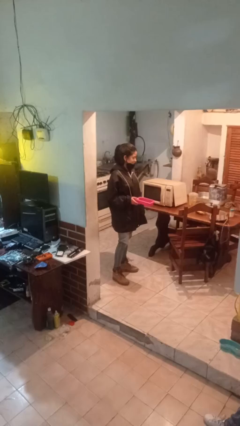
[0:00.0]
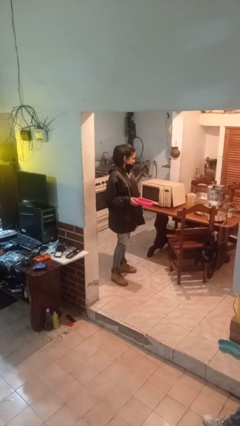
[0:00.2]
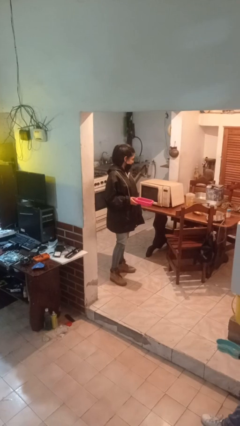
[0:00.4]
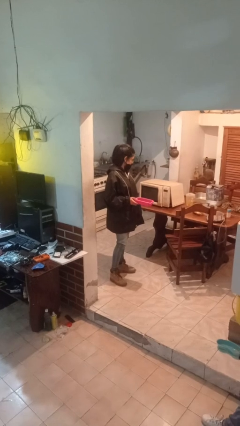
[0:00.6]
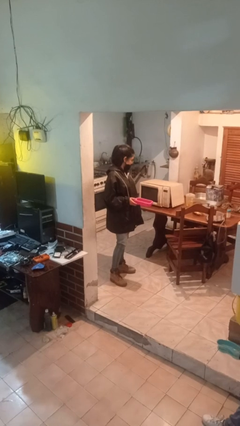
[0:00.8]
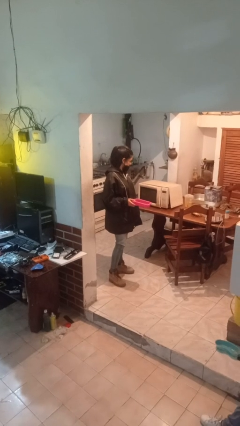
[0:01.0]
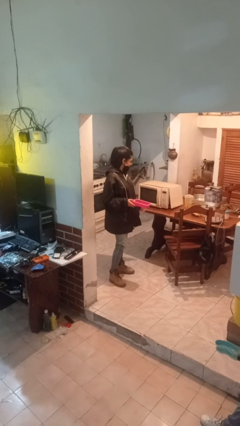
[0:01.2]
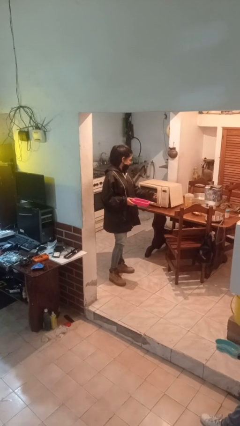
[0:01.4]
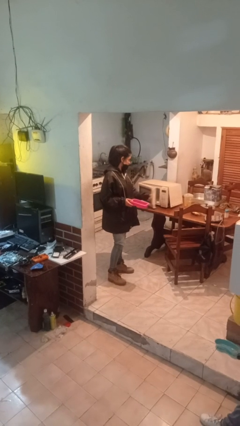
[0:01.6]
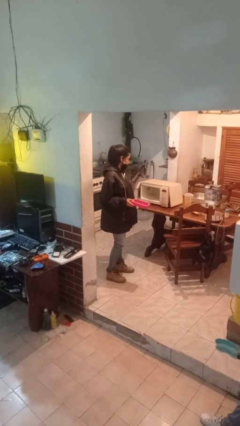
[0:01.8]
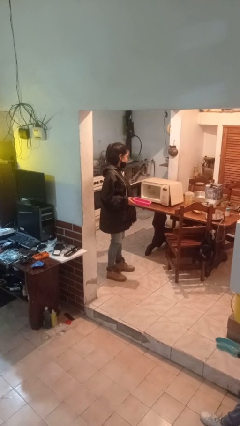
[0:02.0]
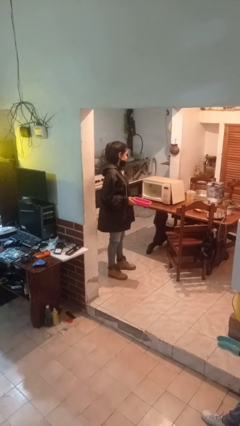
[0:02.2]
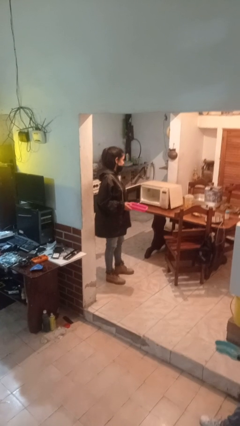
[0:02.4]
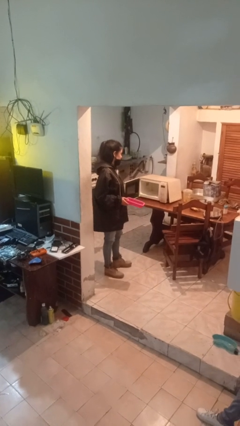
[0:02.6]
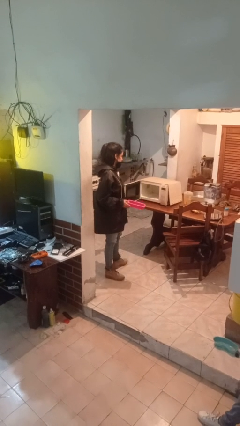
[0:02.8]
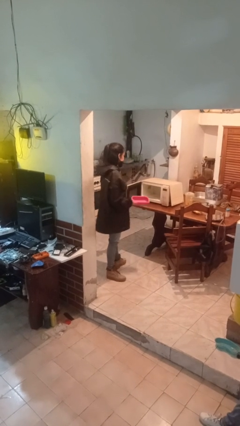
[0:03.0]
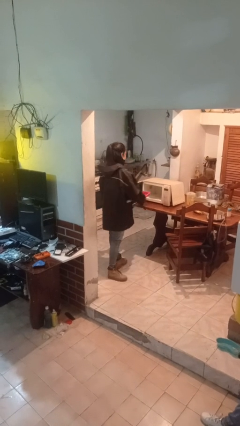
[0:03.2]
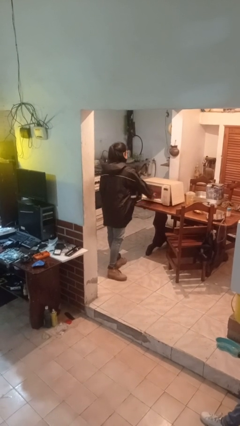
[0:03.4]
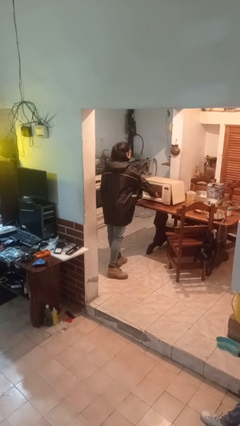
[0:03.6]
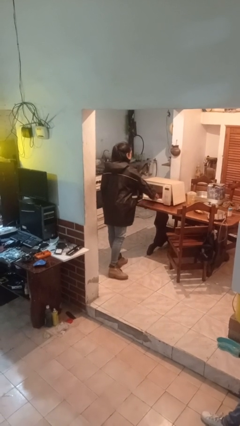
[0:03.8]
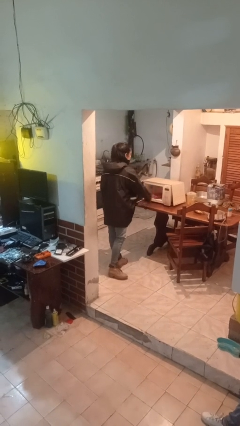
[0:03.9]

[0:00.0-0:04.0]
person dries dish

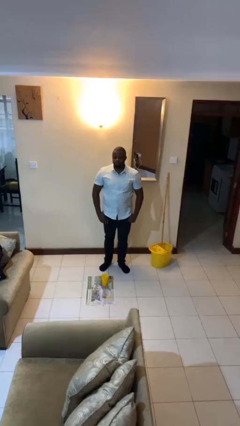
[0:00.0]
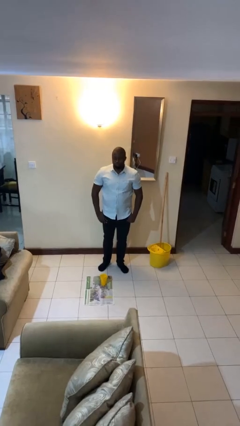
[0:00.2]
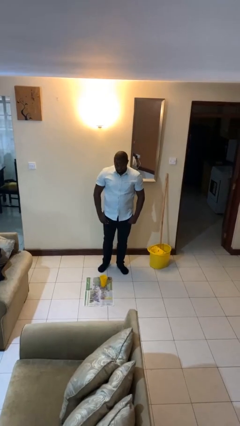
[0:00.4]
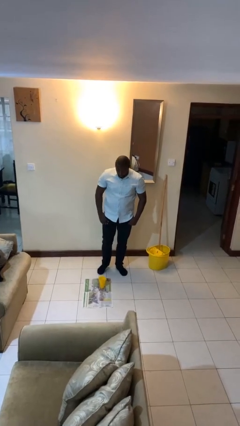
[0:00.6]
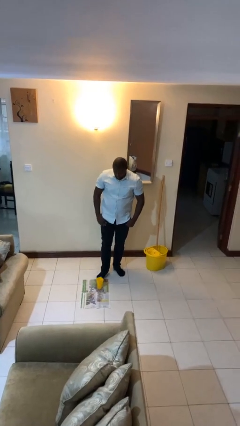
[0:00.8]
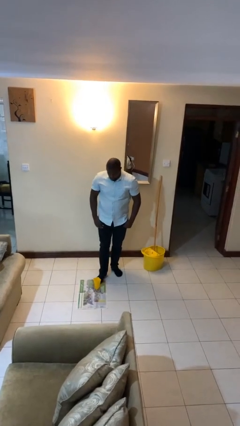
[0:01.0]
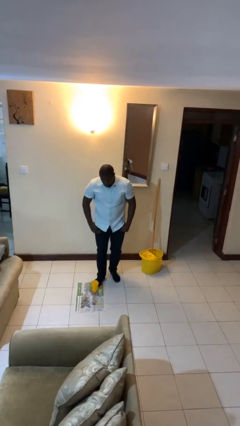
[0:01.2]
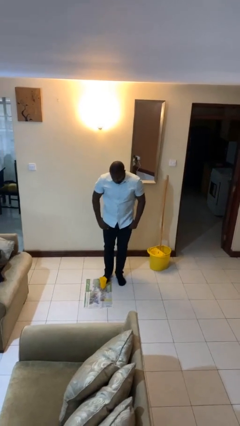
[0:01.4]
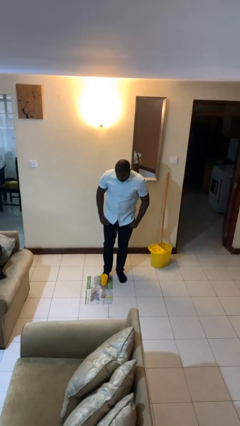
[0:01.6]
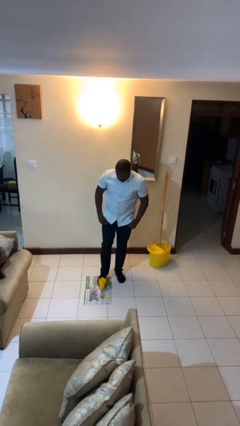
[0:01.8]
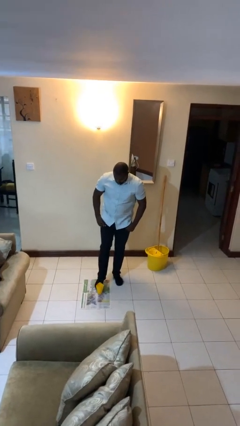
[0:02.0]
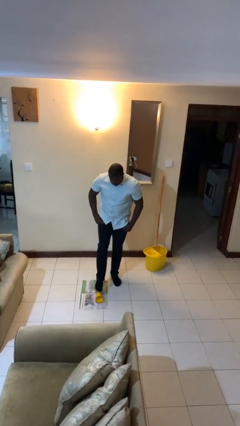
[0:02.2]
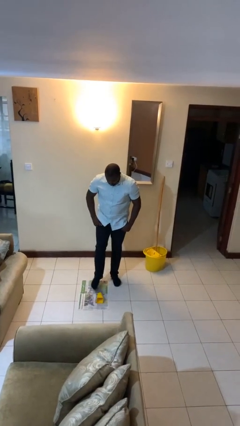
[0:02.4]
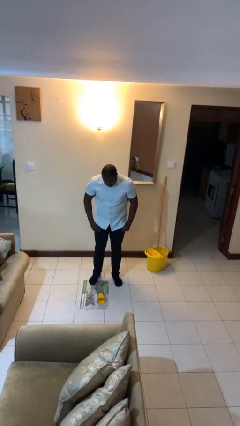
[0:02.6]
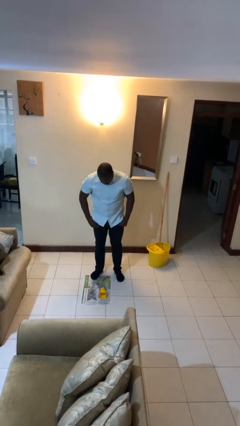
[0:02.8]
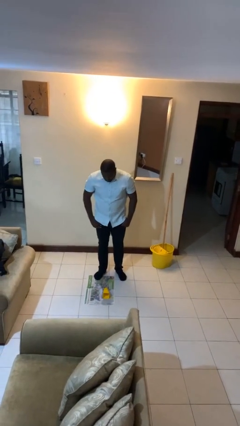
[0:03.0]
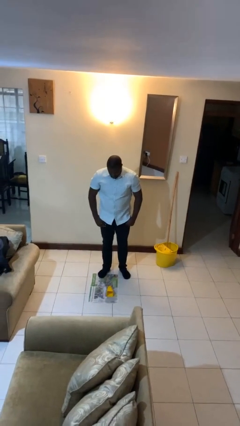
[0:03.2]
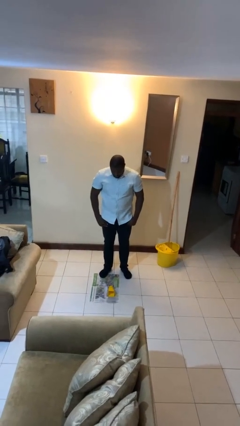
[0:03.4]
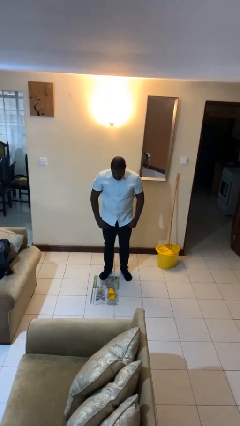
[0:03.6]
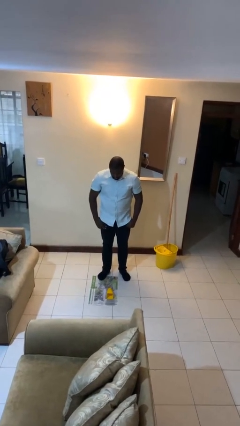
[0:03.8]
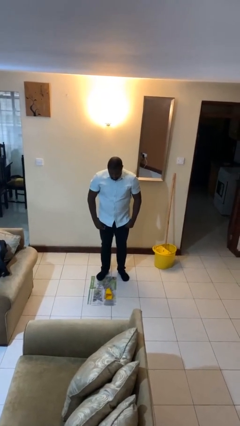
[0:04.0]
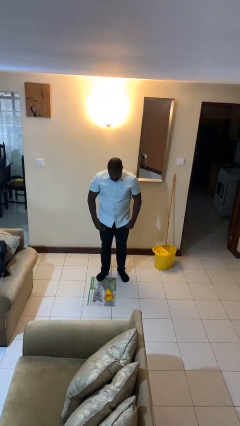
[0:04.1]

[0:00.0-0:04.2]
person spills on floor

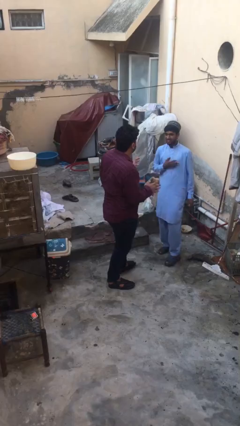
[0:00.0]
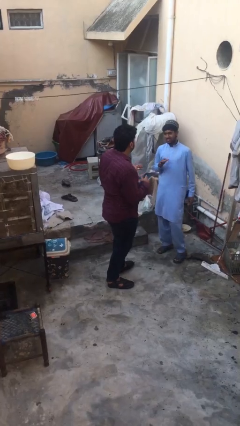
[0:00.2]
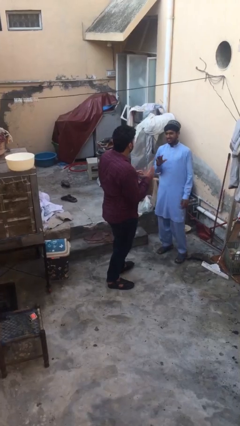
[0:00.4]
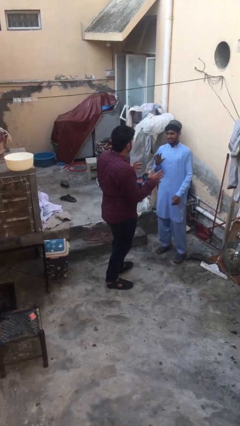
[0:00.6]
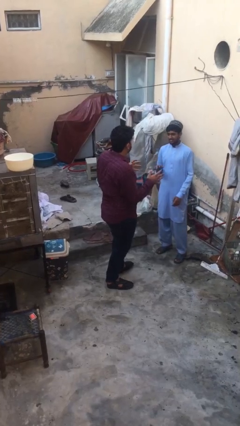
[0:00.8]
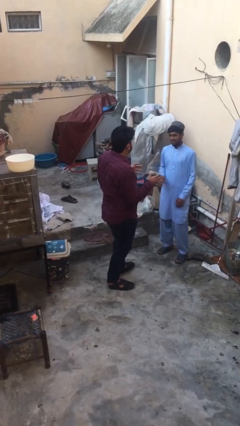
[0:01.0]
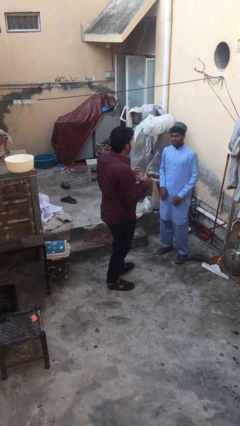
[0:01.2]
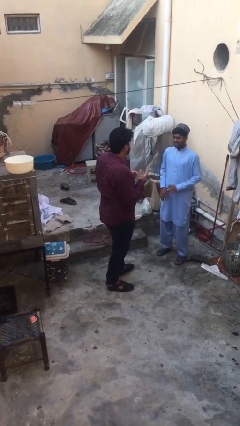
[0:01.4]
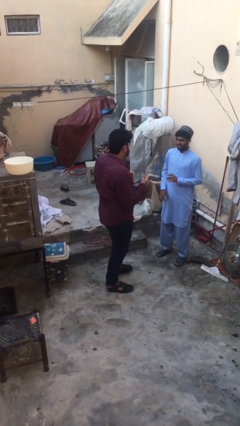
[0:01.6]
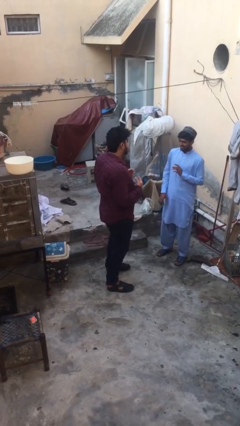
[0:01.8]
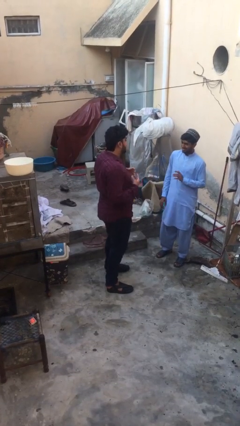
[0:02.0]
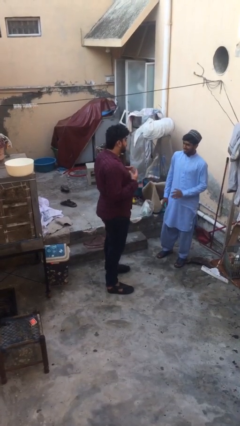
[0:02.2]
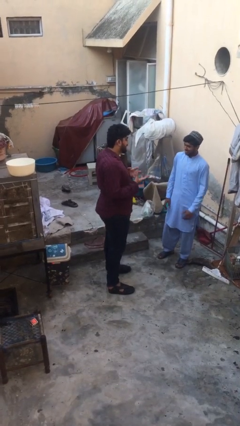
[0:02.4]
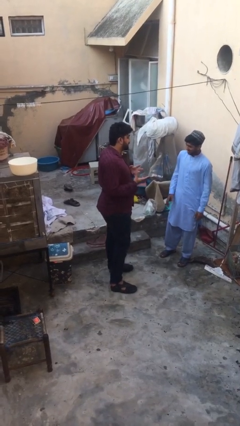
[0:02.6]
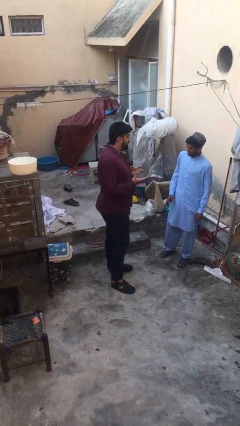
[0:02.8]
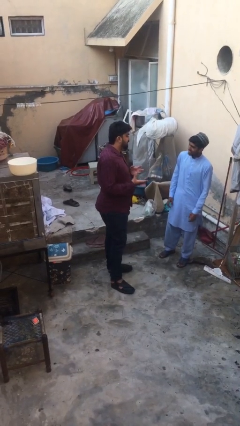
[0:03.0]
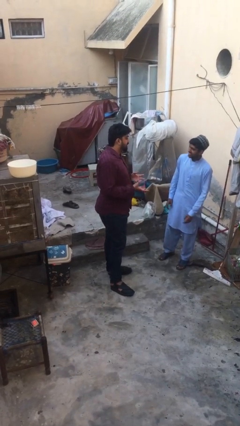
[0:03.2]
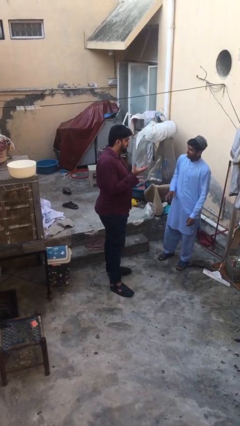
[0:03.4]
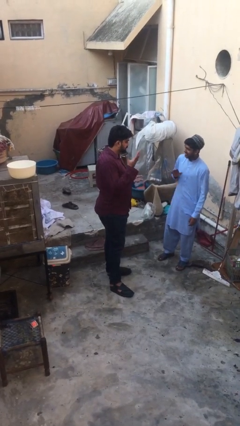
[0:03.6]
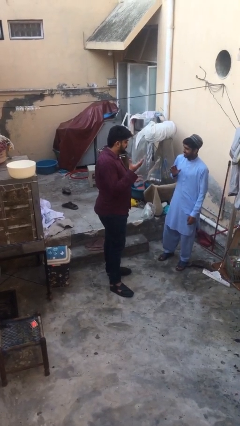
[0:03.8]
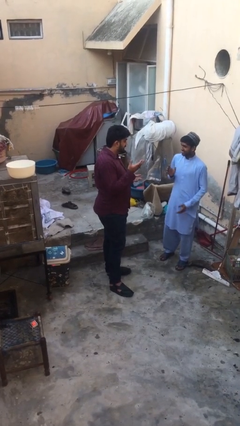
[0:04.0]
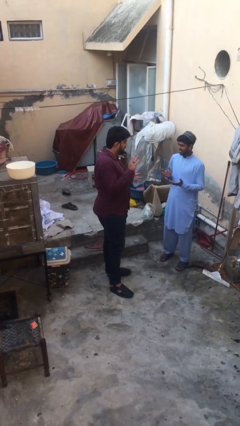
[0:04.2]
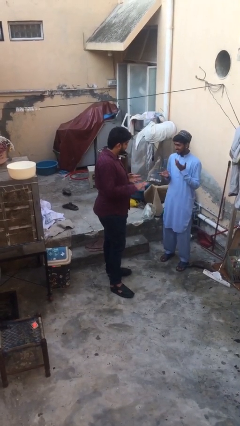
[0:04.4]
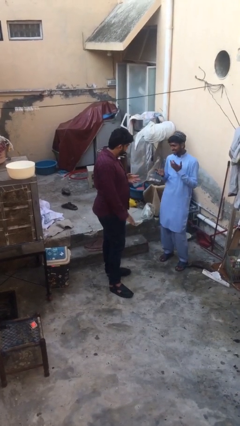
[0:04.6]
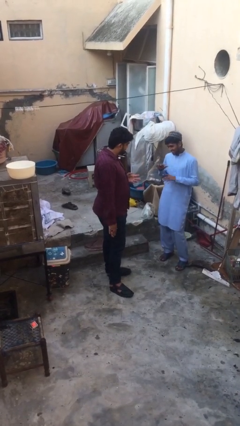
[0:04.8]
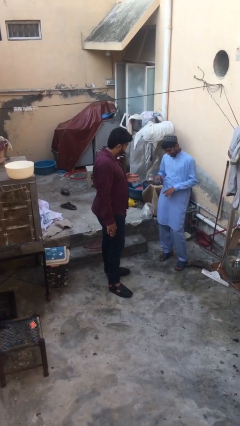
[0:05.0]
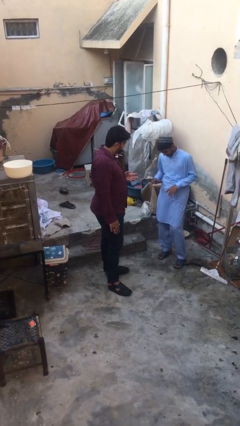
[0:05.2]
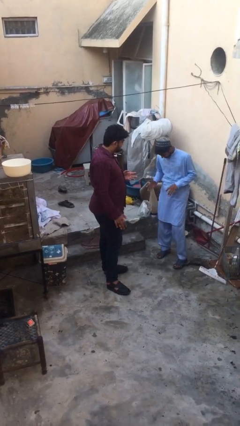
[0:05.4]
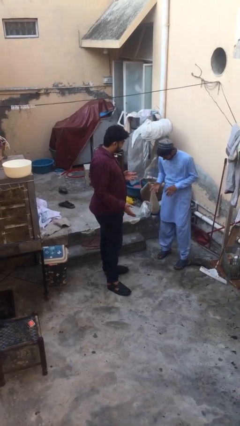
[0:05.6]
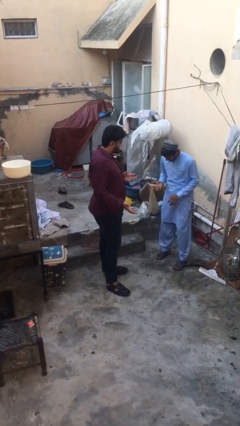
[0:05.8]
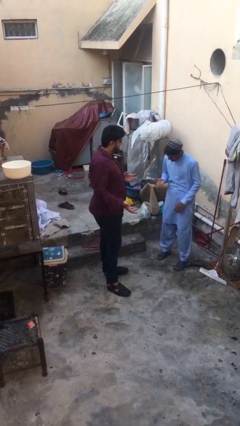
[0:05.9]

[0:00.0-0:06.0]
person talks to person

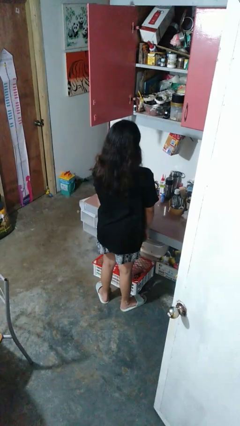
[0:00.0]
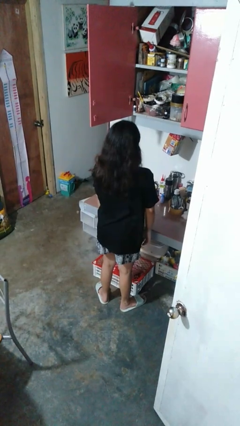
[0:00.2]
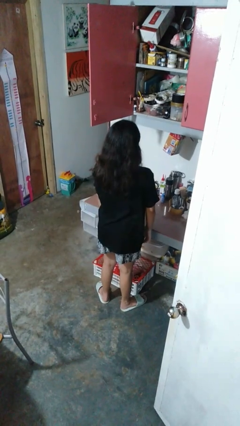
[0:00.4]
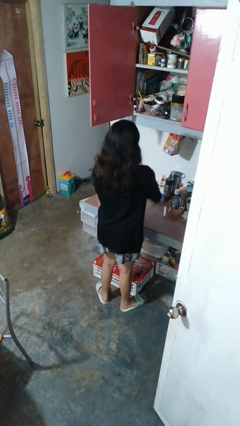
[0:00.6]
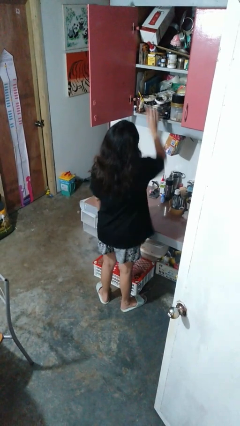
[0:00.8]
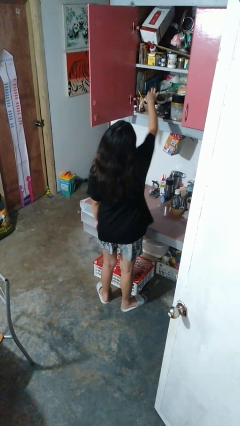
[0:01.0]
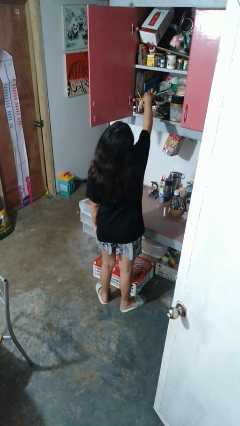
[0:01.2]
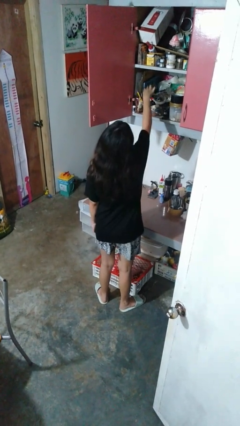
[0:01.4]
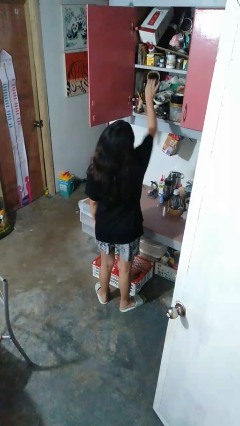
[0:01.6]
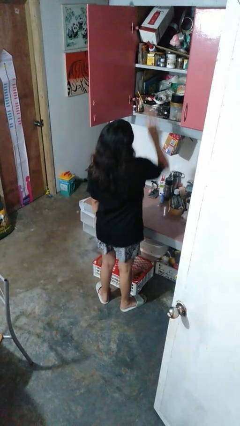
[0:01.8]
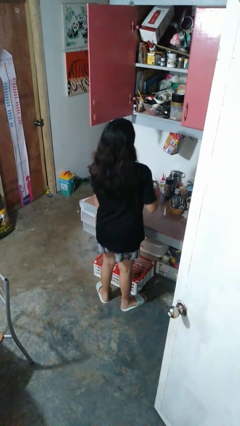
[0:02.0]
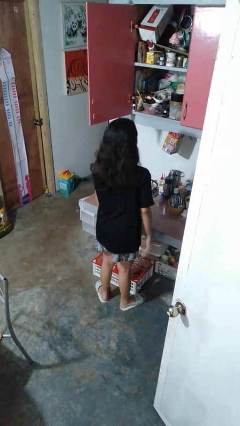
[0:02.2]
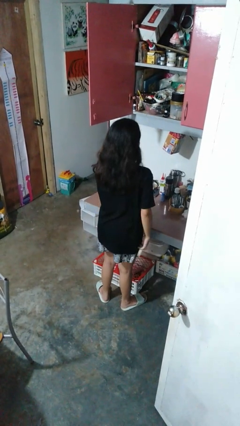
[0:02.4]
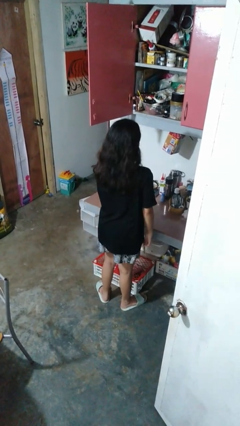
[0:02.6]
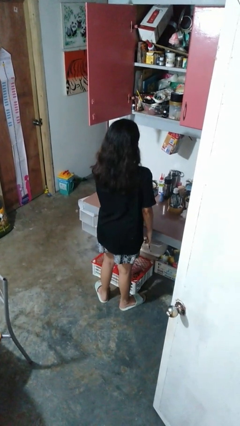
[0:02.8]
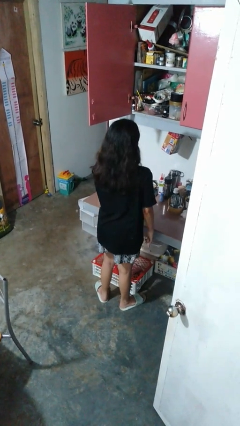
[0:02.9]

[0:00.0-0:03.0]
person takes object from cabinet

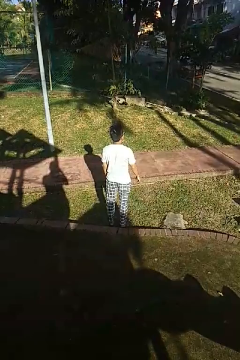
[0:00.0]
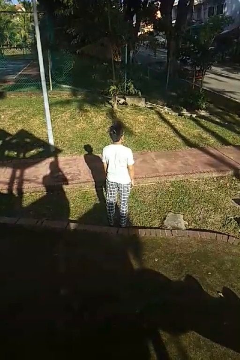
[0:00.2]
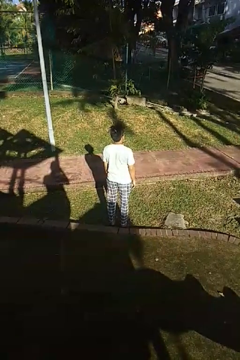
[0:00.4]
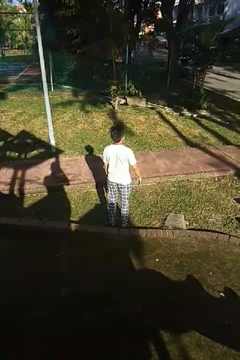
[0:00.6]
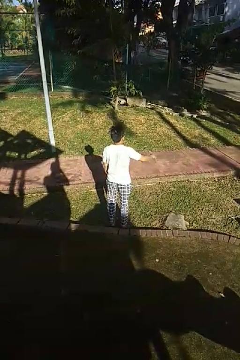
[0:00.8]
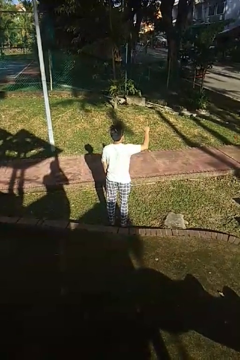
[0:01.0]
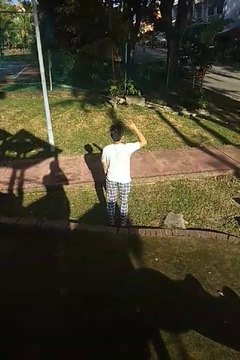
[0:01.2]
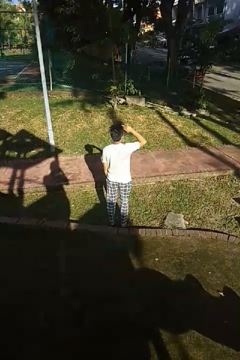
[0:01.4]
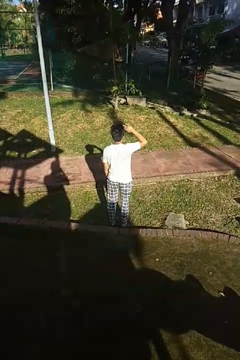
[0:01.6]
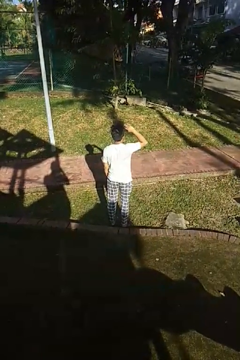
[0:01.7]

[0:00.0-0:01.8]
person salutes
